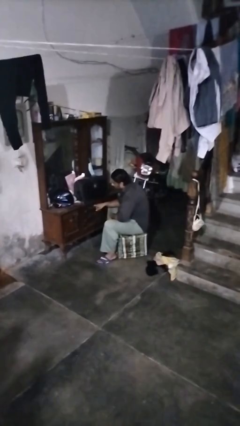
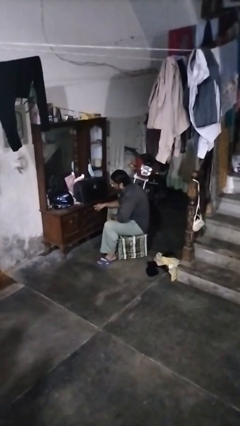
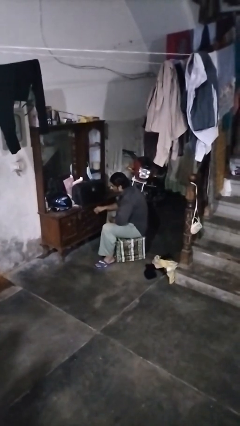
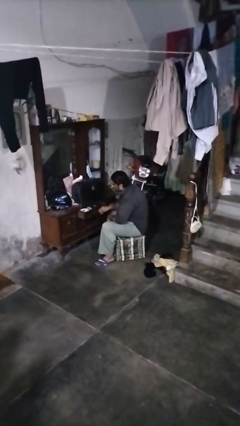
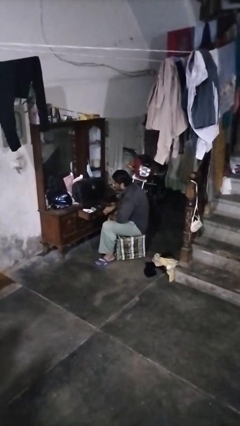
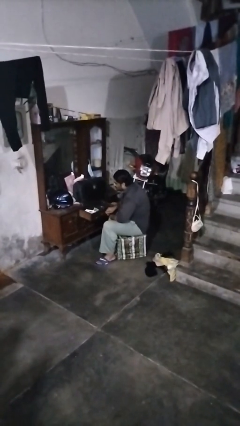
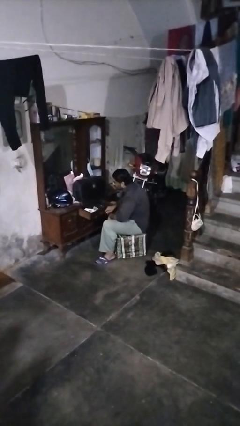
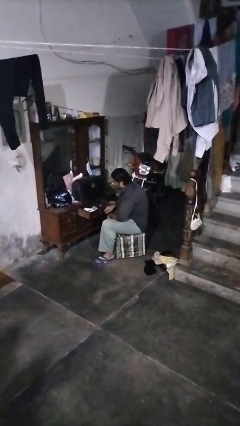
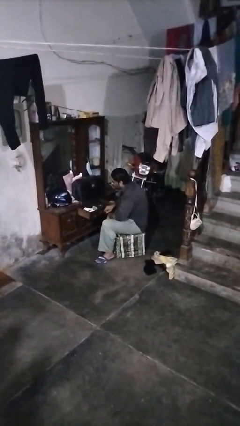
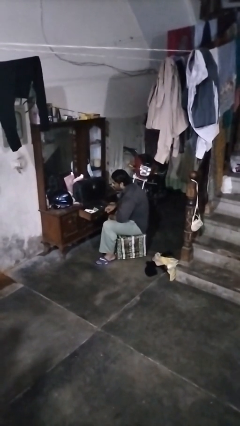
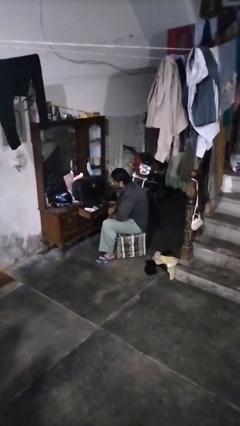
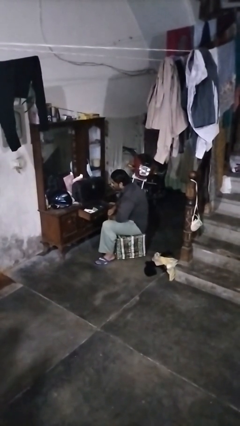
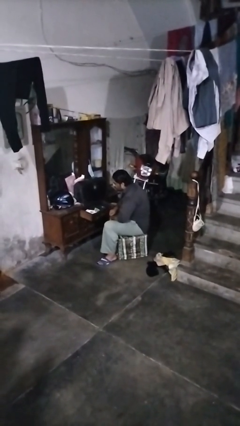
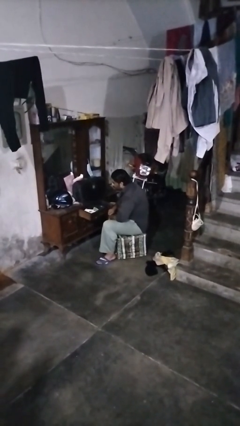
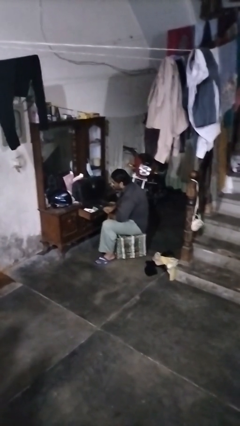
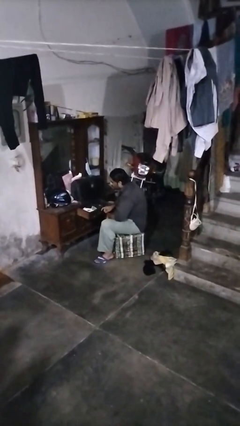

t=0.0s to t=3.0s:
person opens dresser drawer

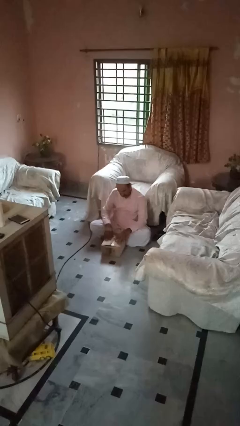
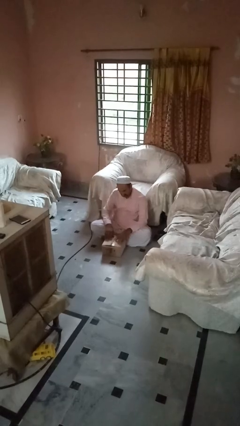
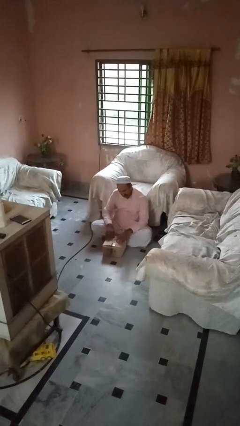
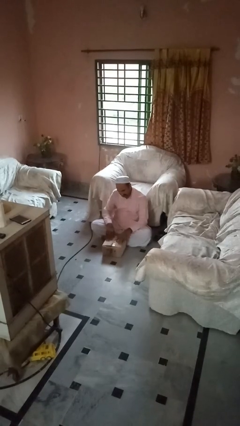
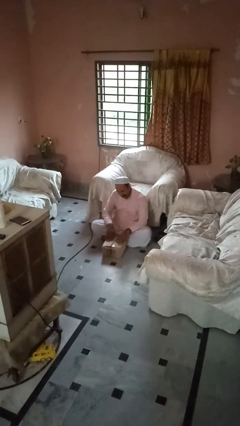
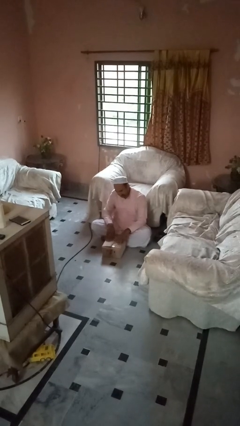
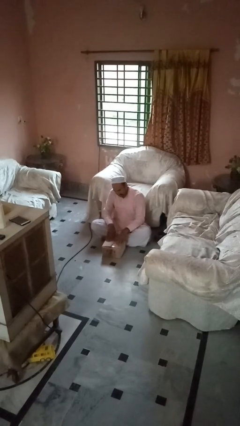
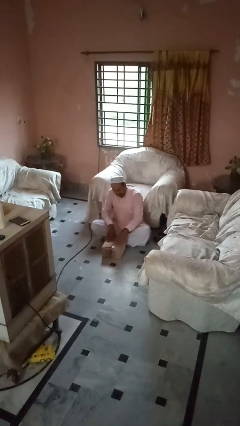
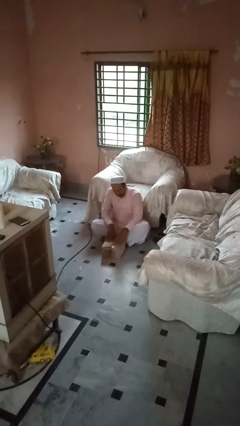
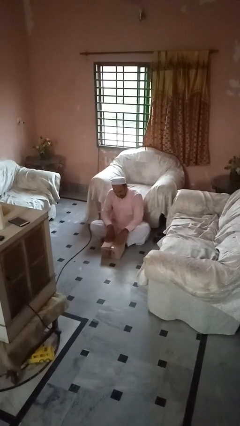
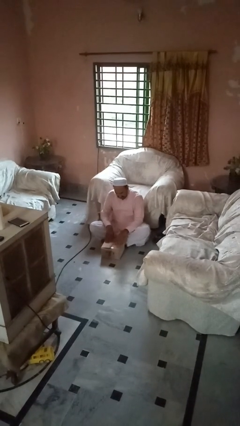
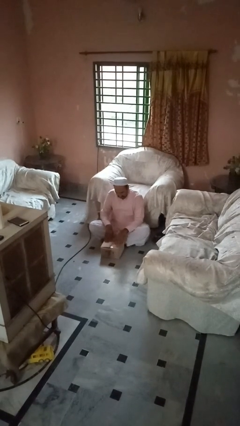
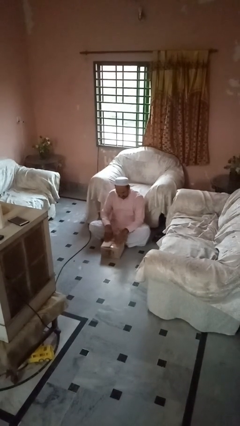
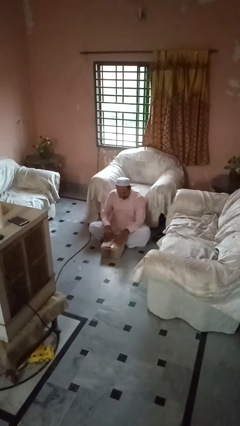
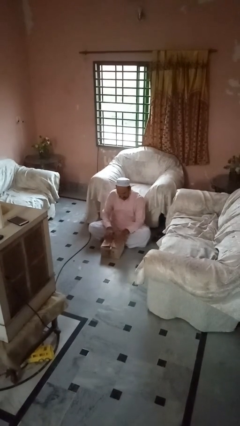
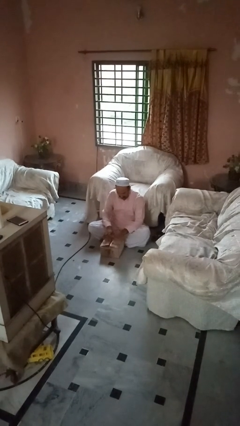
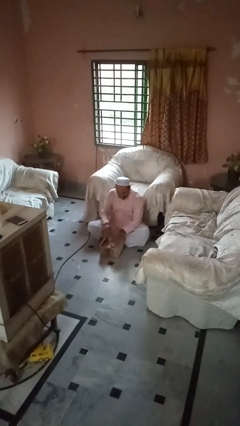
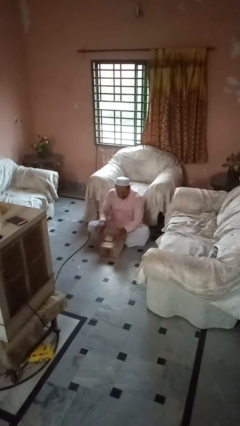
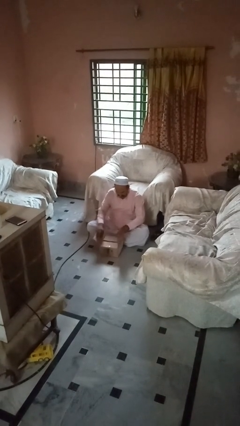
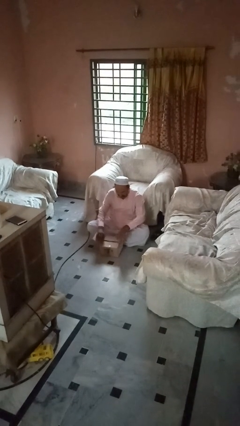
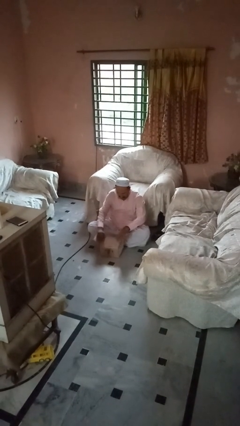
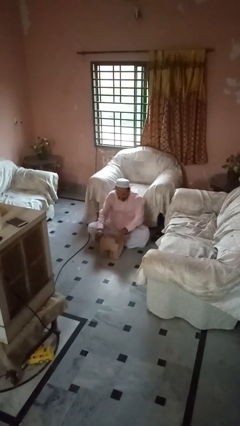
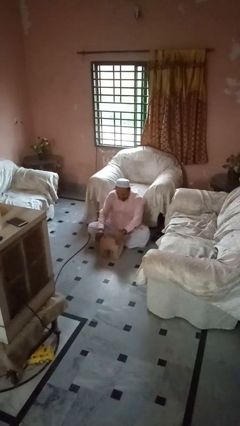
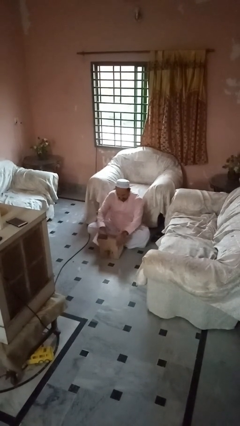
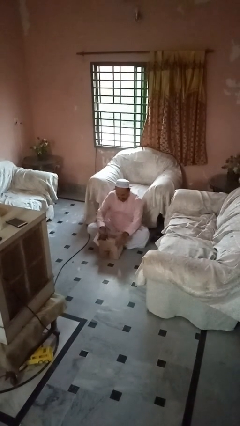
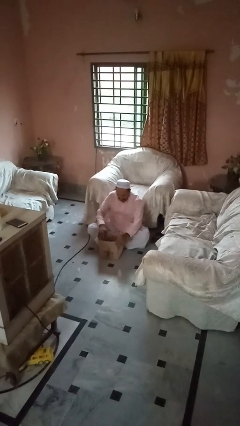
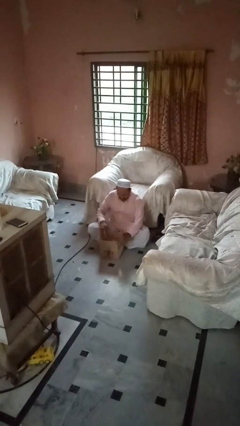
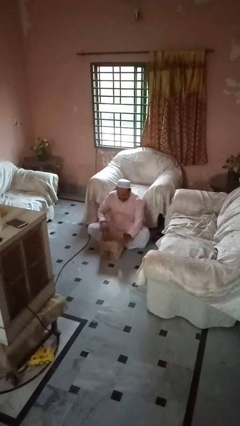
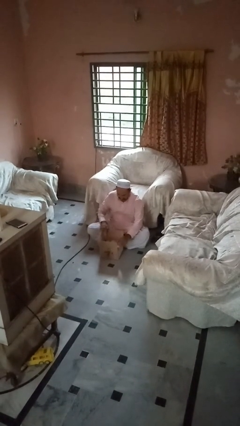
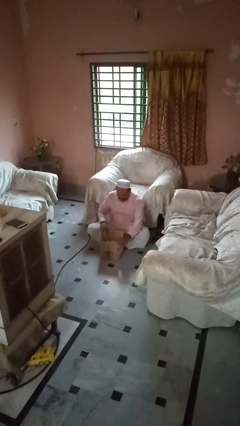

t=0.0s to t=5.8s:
person opens box

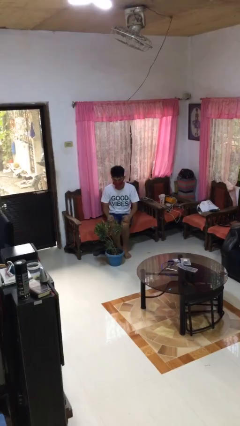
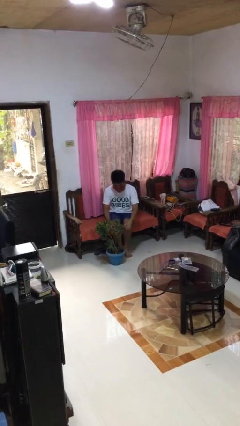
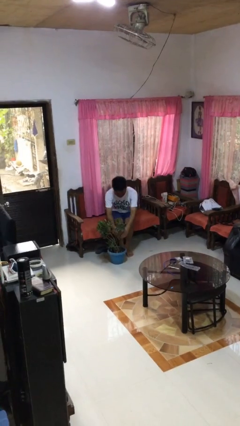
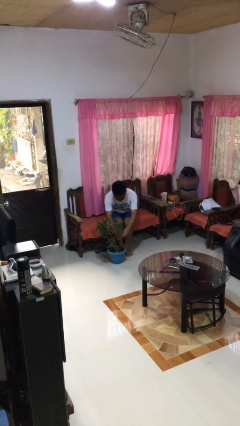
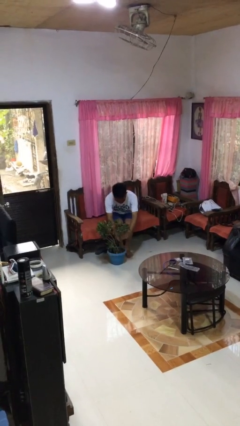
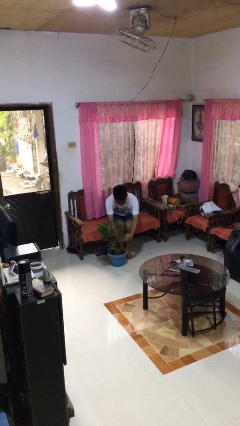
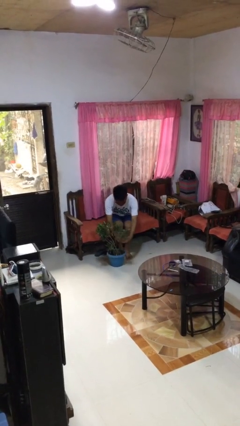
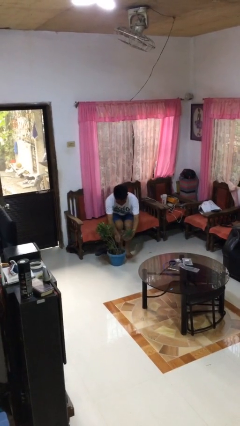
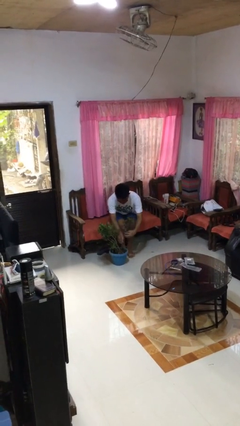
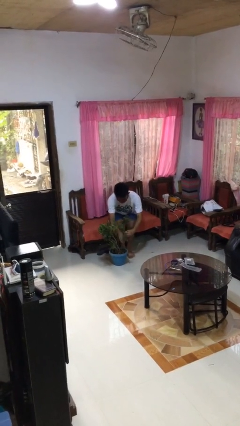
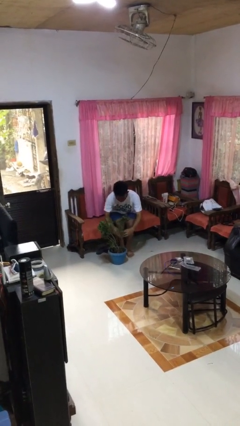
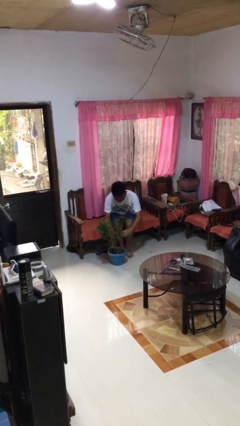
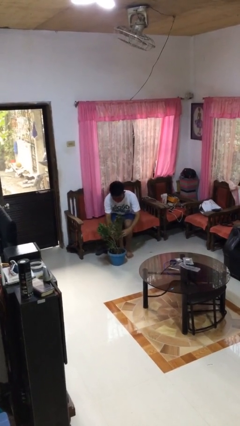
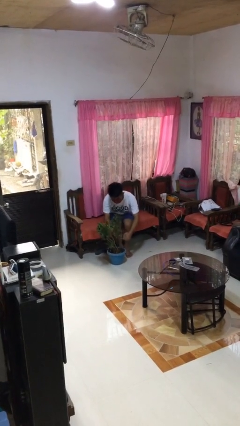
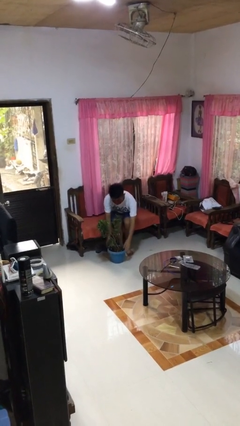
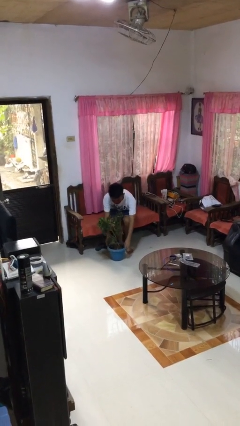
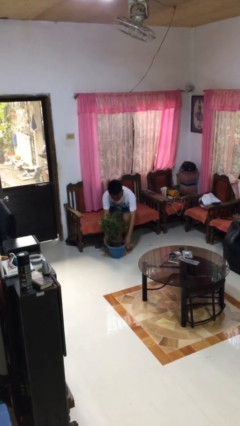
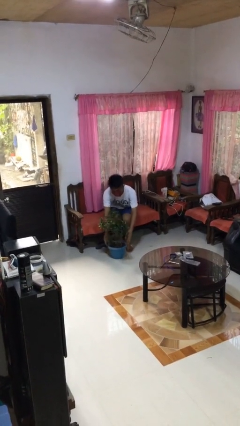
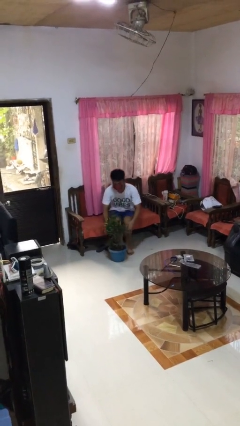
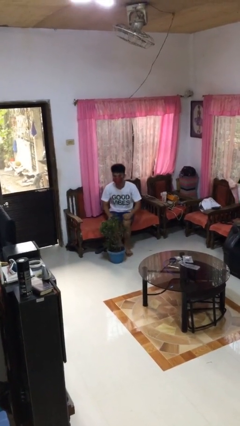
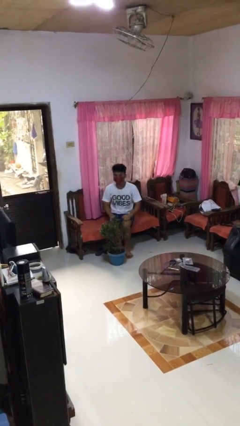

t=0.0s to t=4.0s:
person arranges flowers in vase

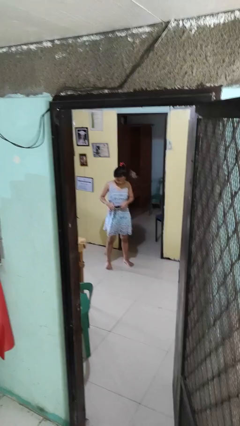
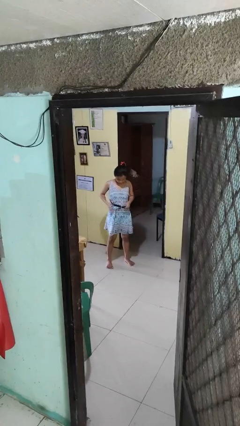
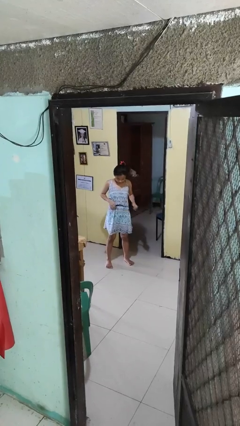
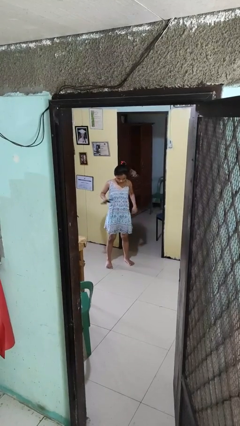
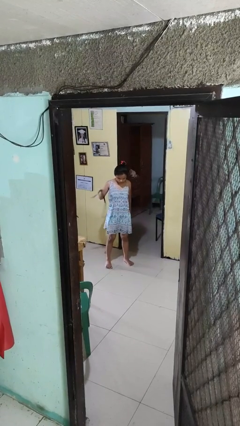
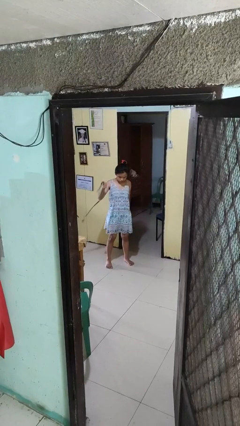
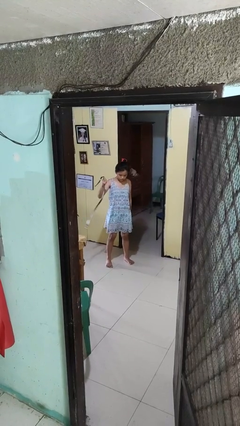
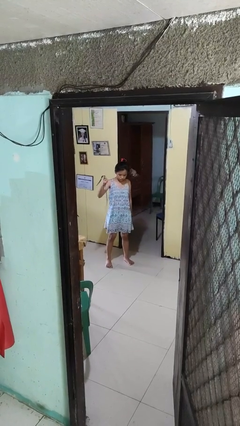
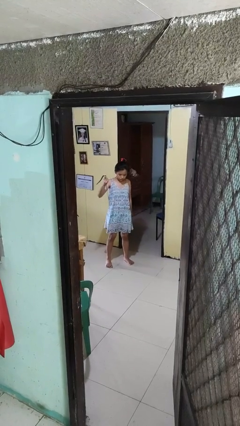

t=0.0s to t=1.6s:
person takes off belt

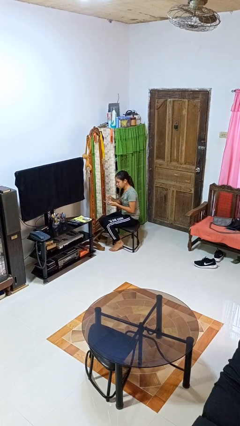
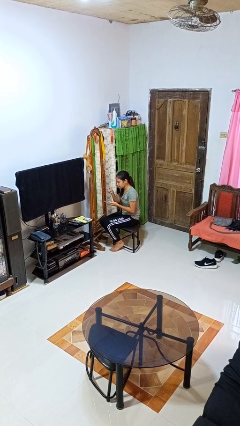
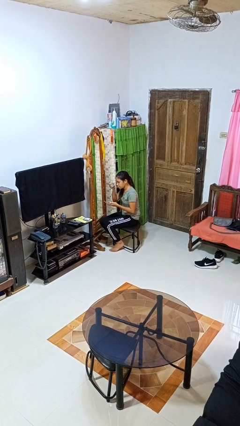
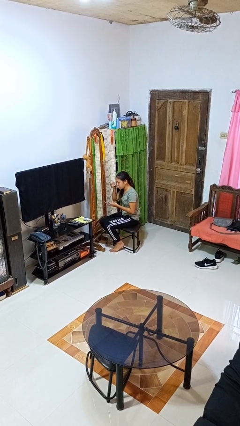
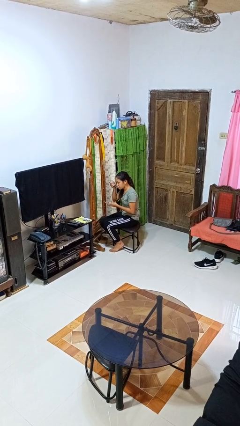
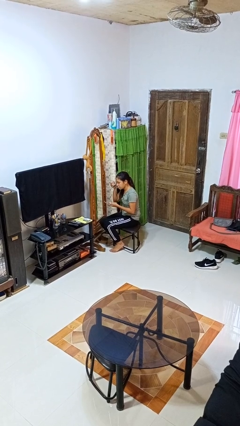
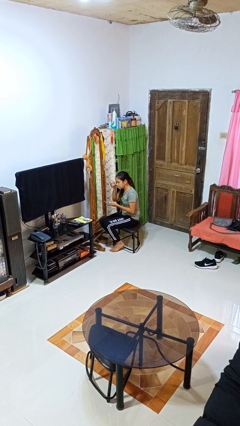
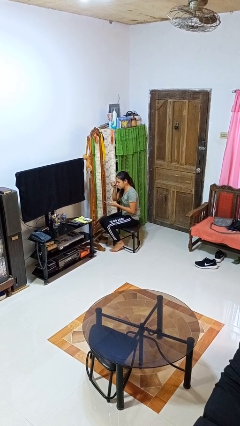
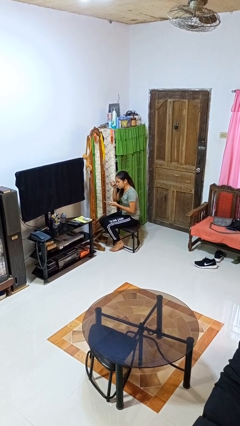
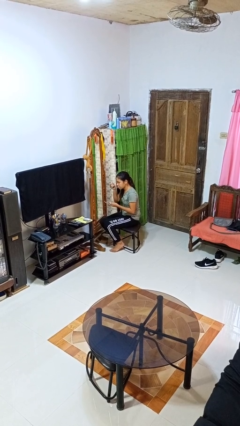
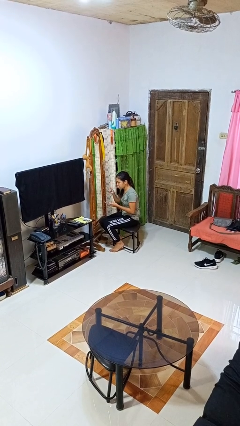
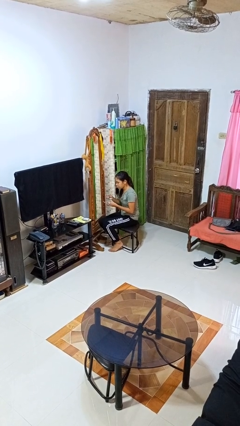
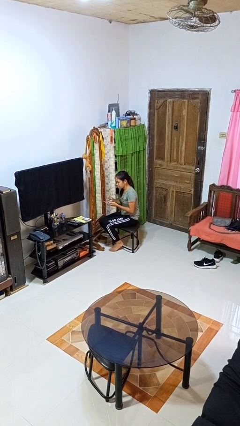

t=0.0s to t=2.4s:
person applies eye makeup

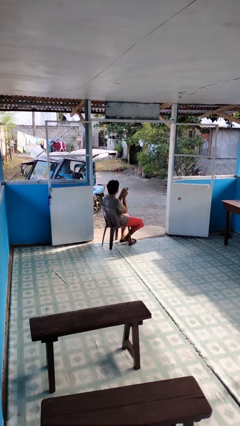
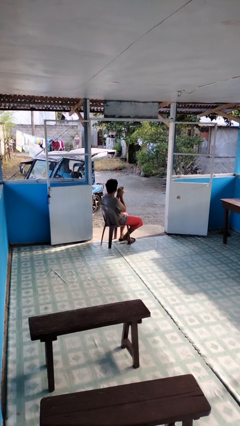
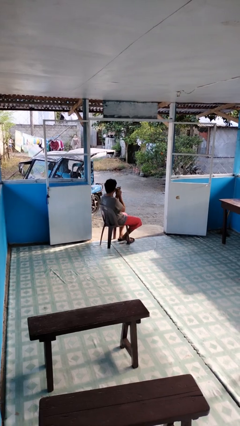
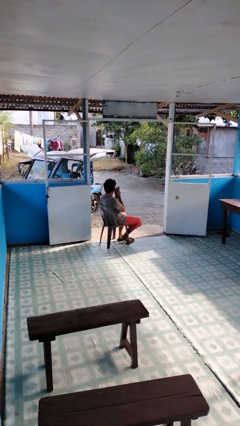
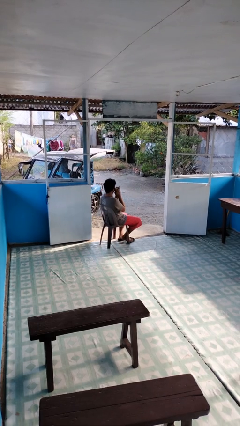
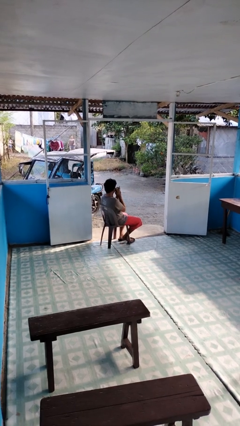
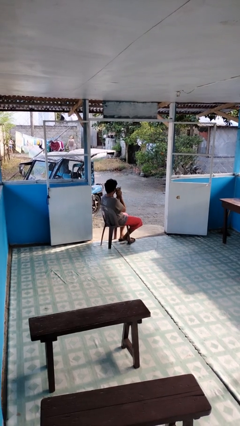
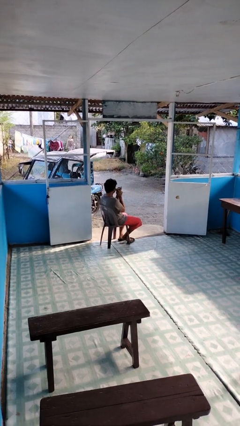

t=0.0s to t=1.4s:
person hugs cat
